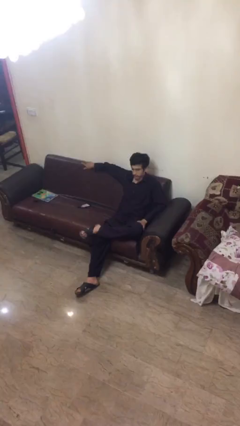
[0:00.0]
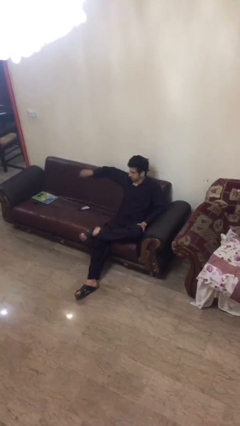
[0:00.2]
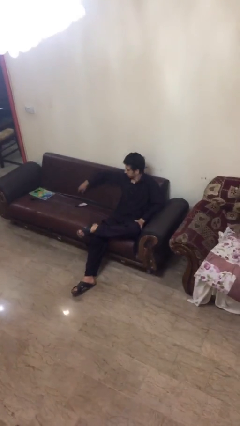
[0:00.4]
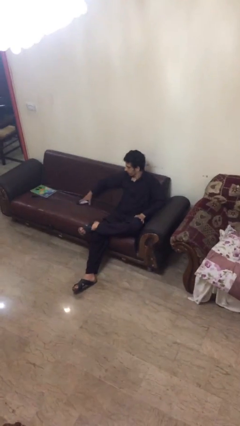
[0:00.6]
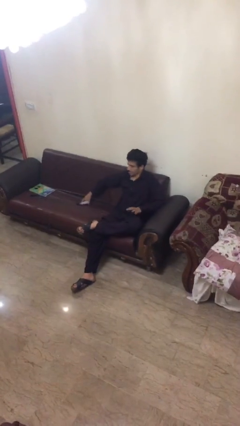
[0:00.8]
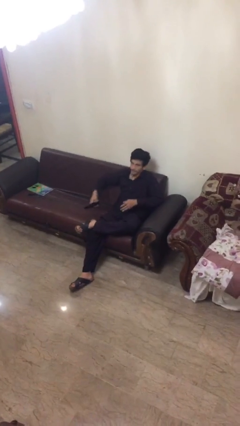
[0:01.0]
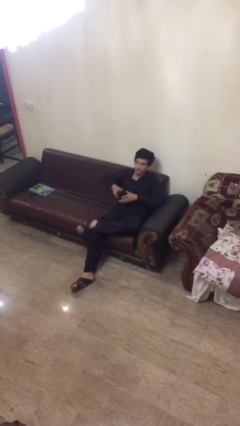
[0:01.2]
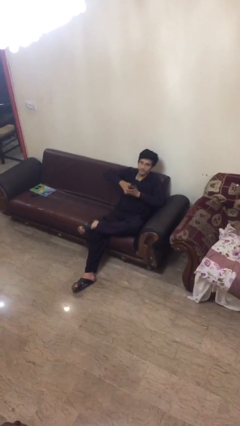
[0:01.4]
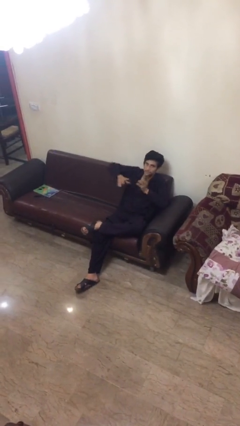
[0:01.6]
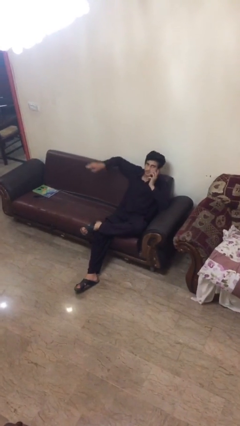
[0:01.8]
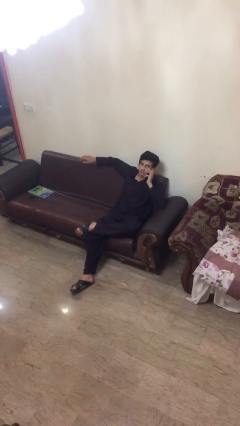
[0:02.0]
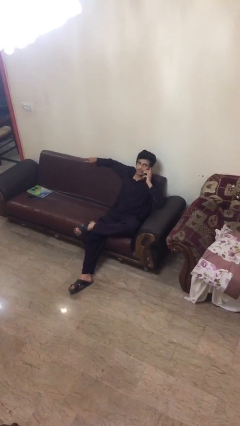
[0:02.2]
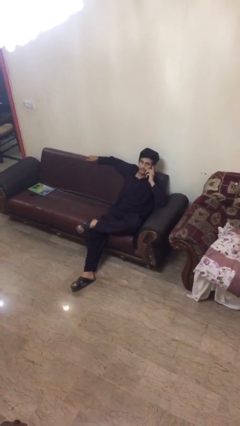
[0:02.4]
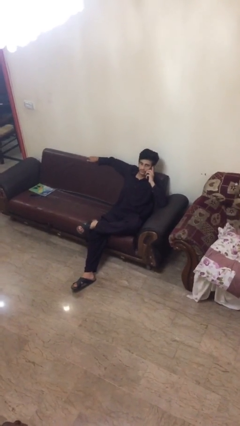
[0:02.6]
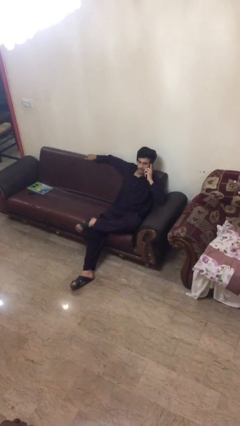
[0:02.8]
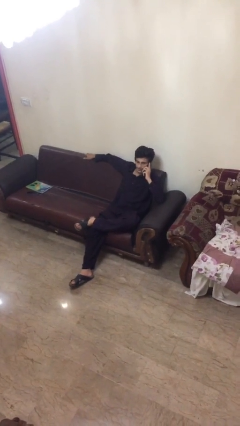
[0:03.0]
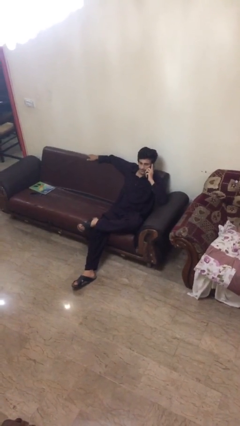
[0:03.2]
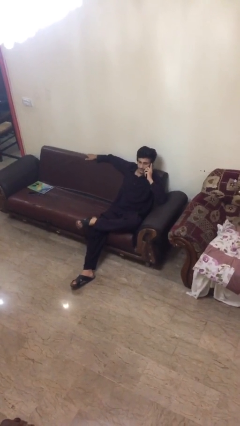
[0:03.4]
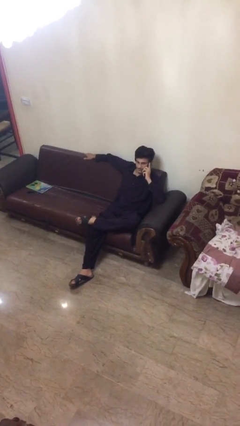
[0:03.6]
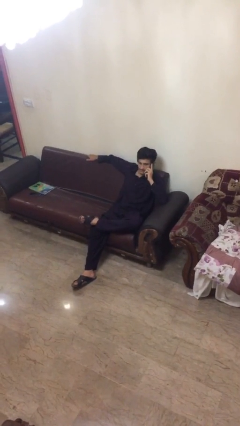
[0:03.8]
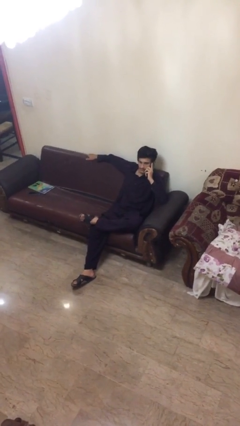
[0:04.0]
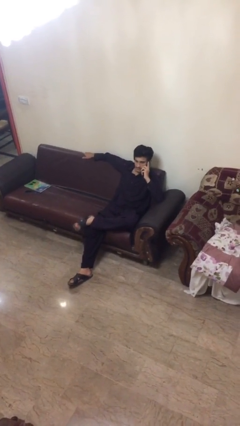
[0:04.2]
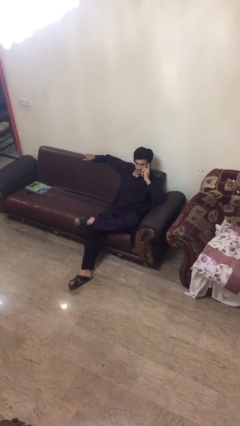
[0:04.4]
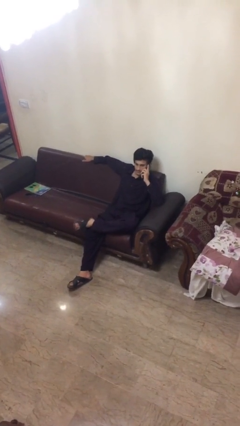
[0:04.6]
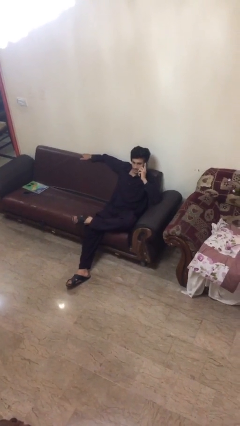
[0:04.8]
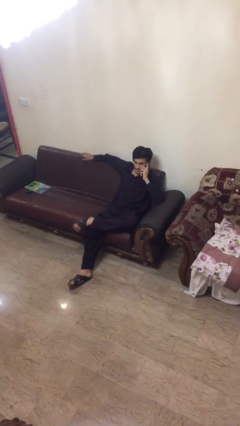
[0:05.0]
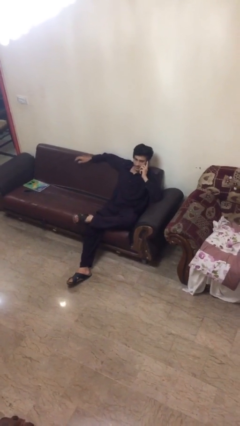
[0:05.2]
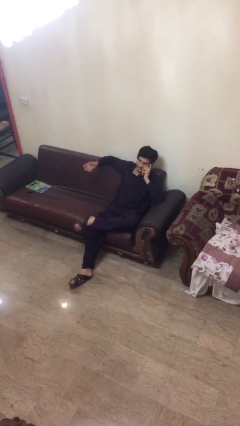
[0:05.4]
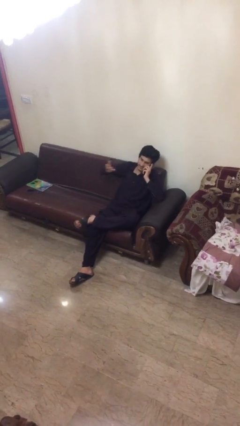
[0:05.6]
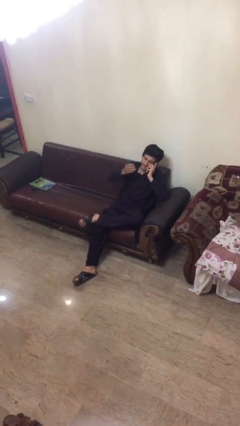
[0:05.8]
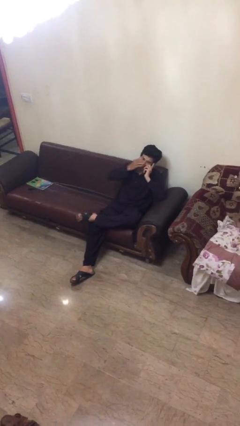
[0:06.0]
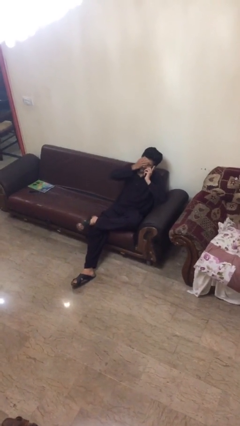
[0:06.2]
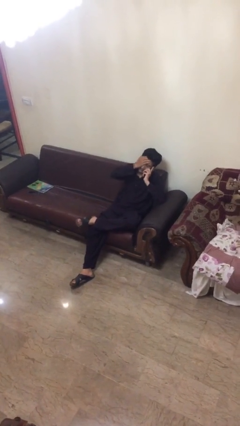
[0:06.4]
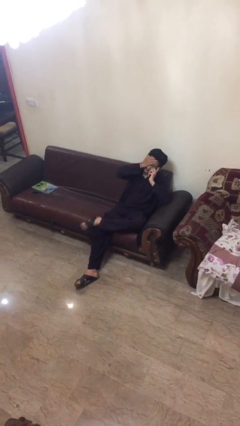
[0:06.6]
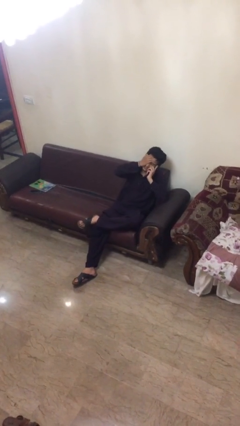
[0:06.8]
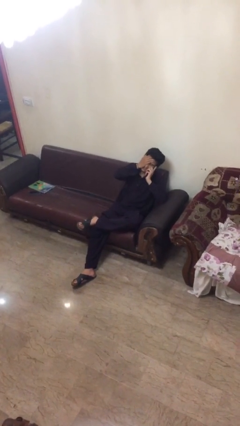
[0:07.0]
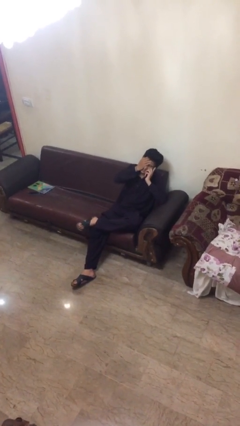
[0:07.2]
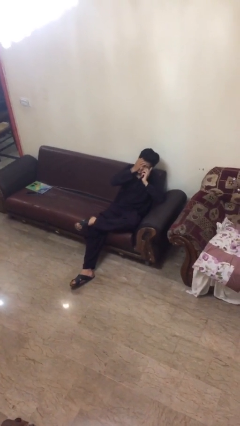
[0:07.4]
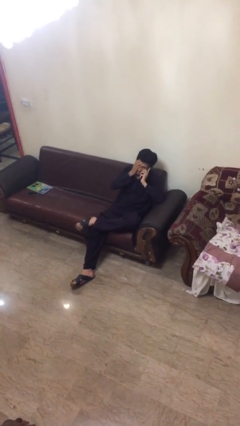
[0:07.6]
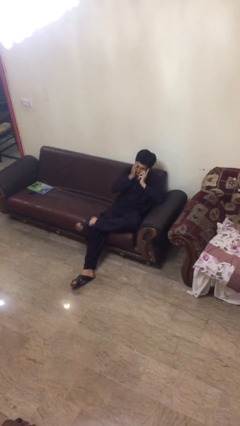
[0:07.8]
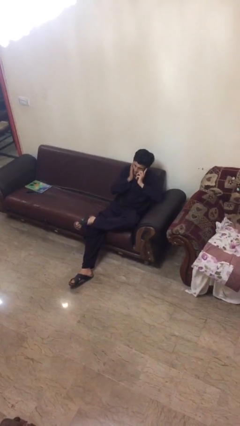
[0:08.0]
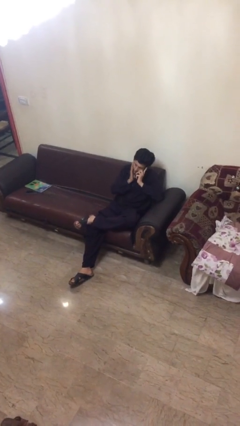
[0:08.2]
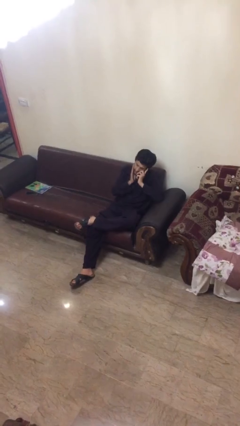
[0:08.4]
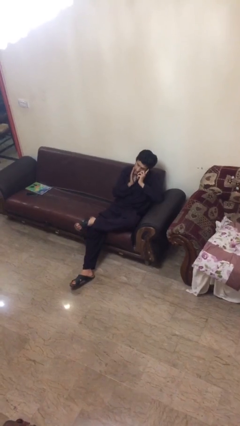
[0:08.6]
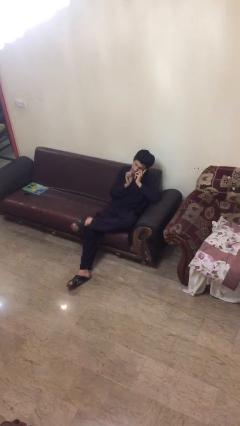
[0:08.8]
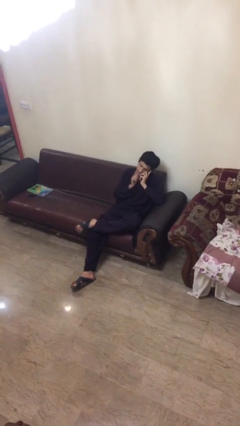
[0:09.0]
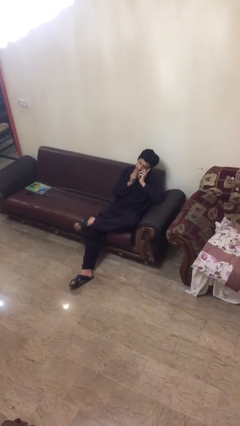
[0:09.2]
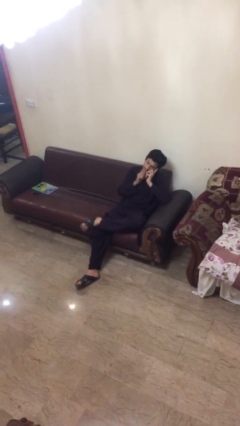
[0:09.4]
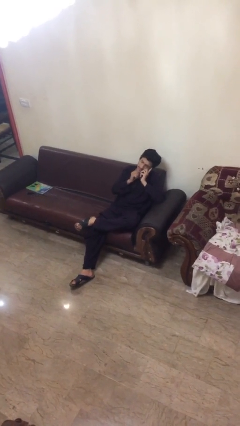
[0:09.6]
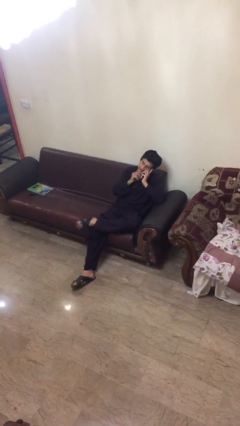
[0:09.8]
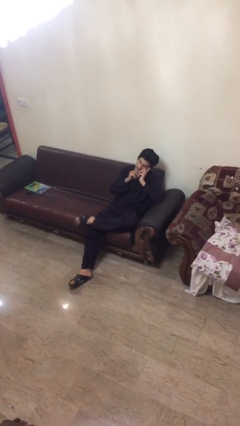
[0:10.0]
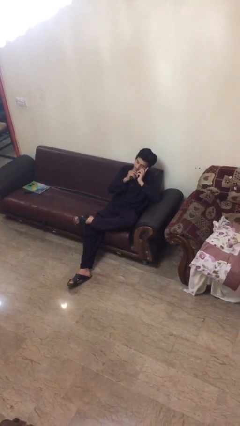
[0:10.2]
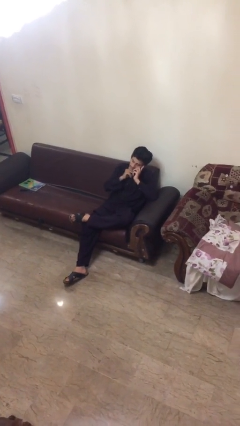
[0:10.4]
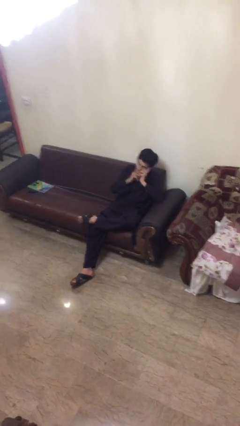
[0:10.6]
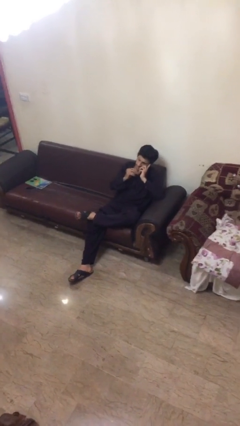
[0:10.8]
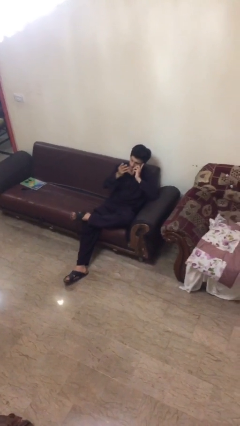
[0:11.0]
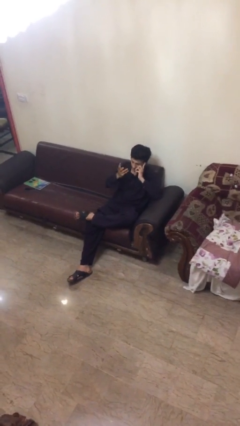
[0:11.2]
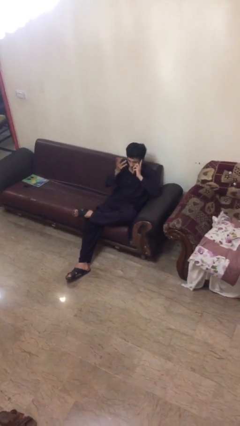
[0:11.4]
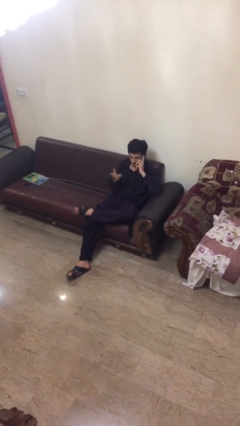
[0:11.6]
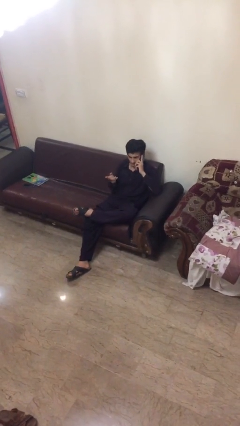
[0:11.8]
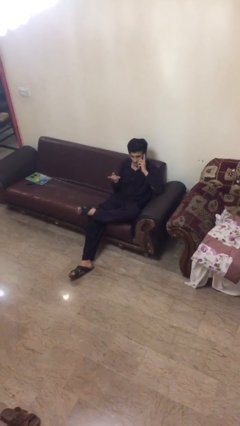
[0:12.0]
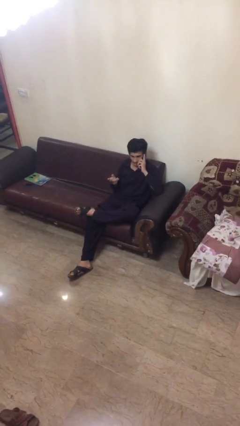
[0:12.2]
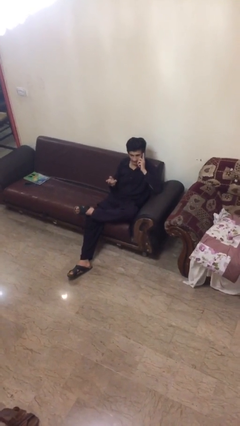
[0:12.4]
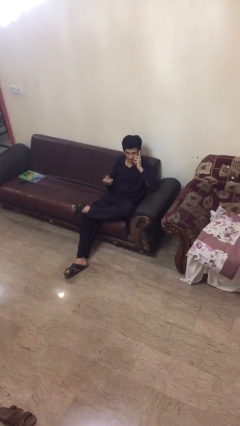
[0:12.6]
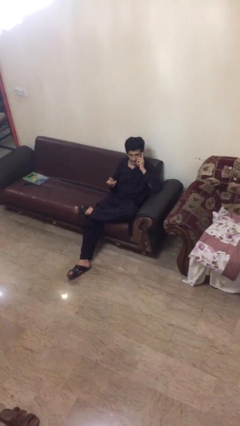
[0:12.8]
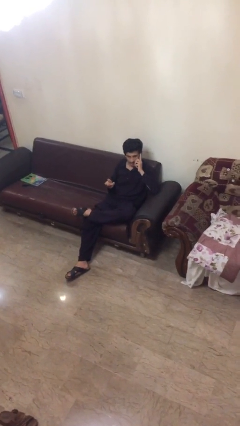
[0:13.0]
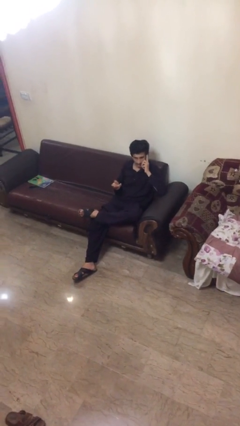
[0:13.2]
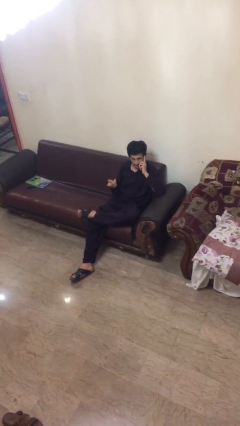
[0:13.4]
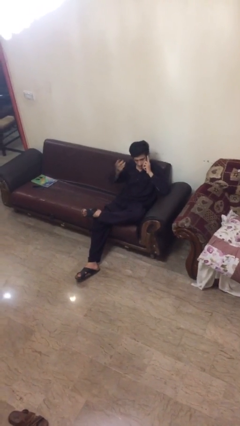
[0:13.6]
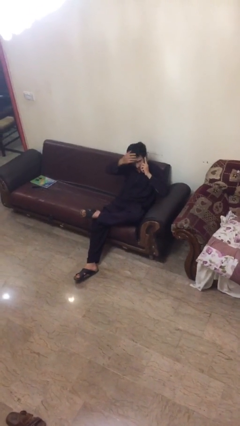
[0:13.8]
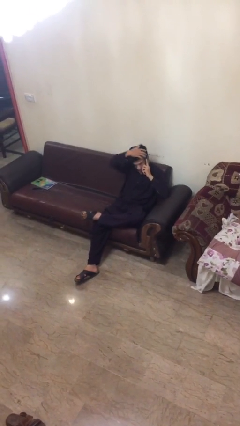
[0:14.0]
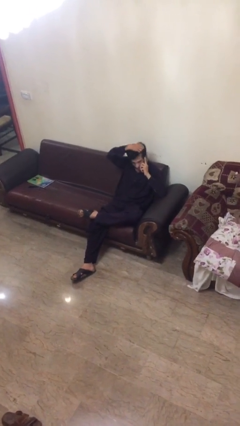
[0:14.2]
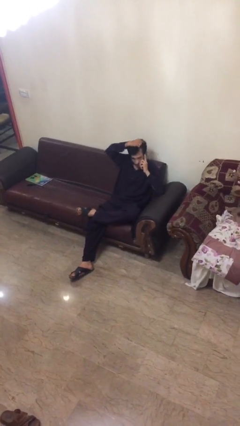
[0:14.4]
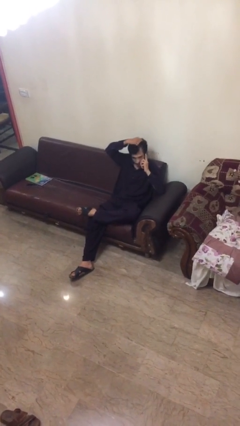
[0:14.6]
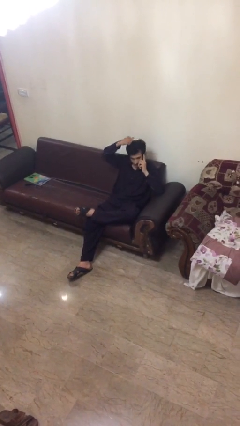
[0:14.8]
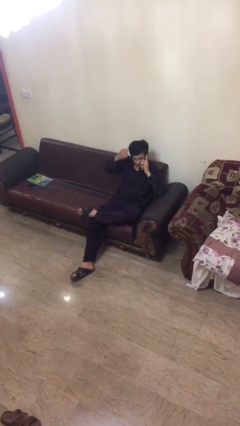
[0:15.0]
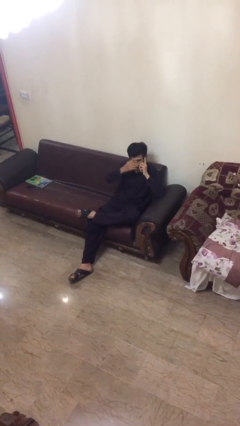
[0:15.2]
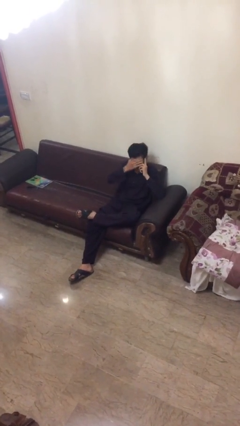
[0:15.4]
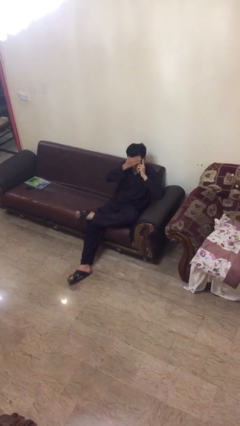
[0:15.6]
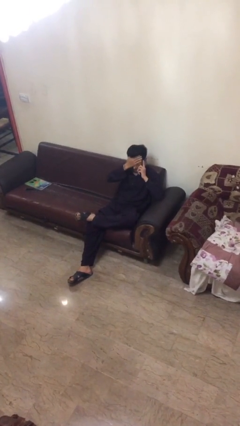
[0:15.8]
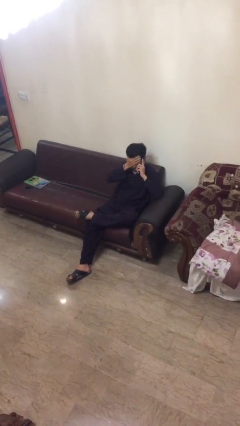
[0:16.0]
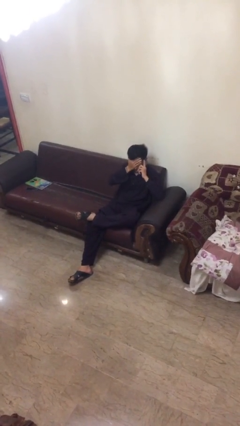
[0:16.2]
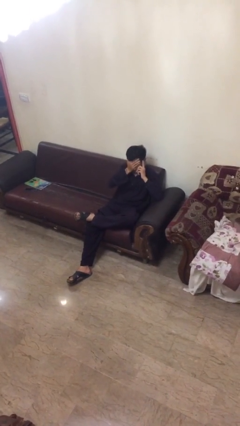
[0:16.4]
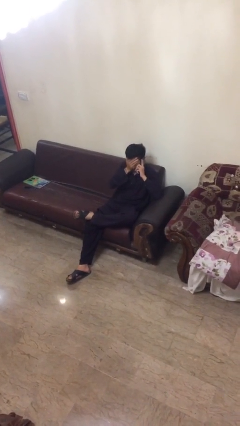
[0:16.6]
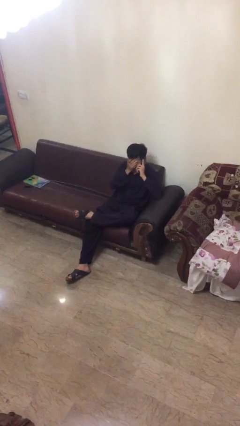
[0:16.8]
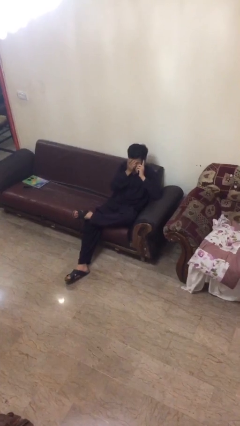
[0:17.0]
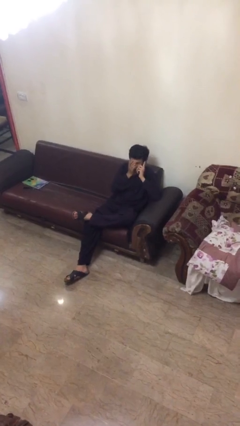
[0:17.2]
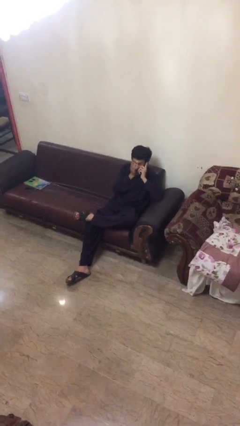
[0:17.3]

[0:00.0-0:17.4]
person talks on phone

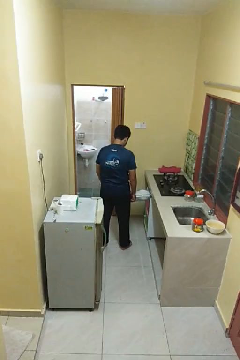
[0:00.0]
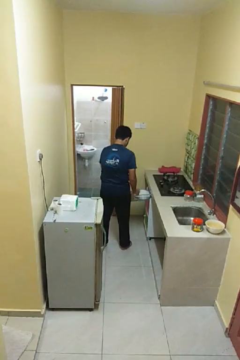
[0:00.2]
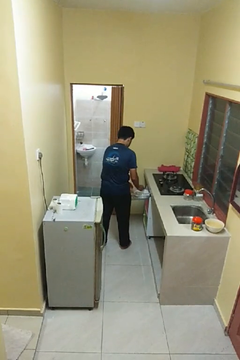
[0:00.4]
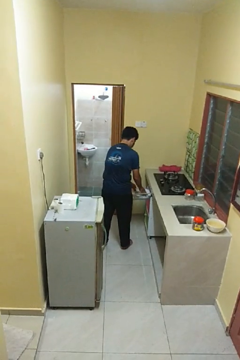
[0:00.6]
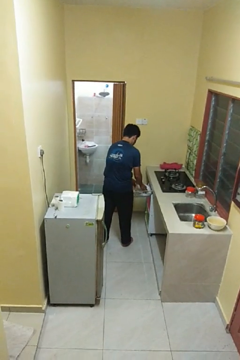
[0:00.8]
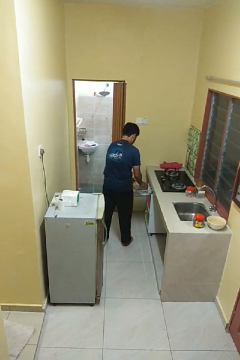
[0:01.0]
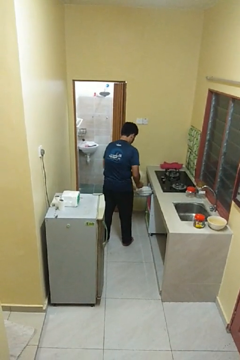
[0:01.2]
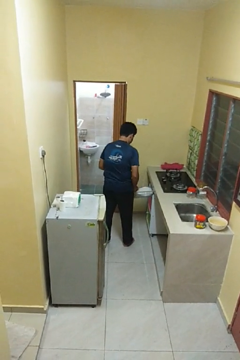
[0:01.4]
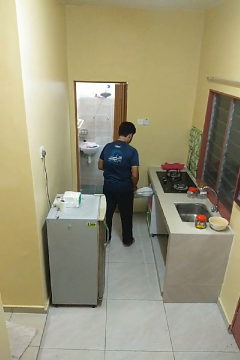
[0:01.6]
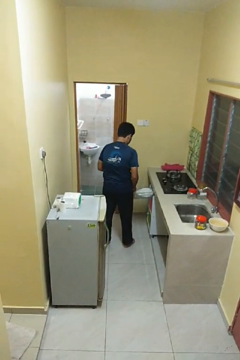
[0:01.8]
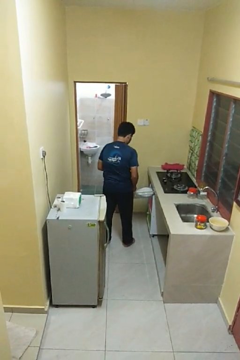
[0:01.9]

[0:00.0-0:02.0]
person takes object from kitchen drawer
